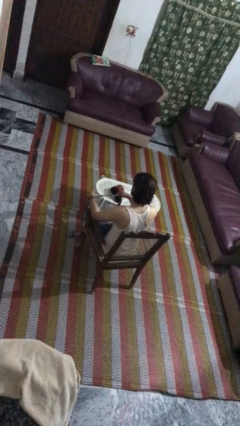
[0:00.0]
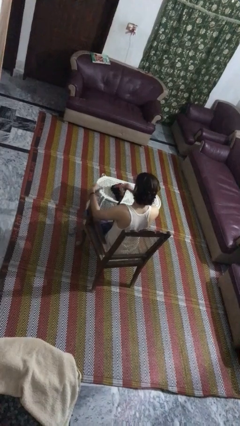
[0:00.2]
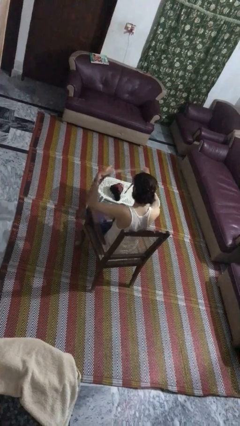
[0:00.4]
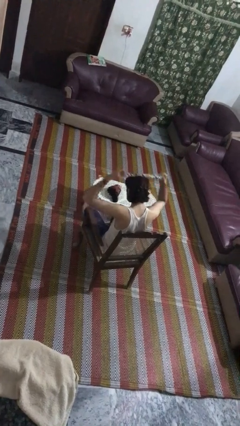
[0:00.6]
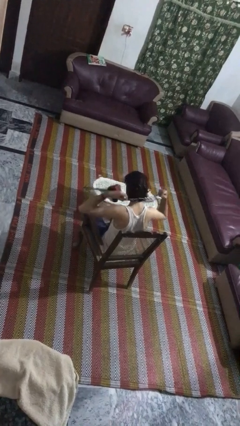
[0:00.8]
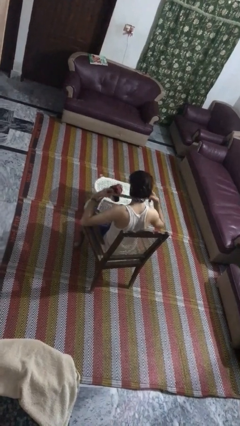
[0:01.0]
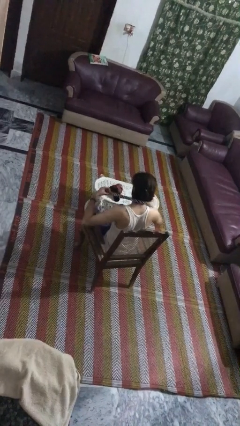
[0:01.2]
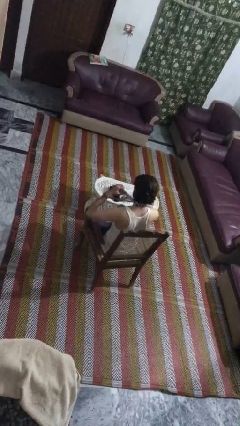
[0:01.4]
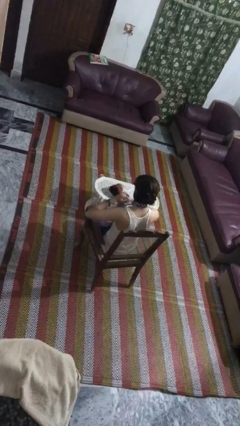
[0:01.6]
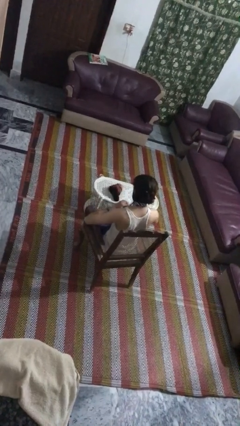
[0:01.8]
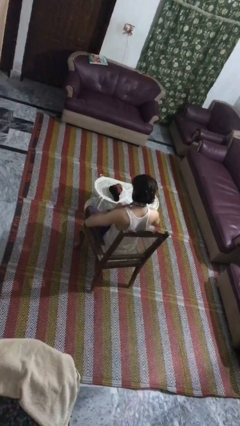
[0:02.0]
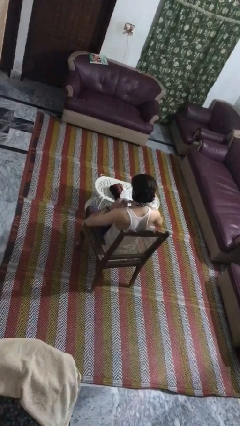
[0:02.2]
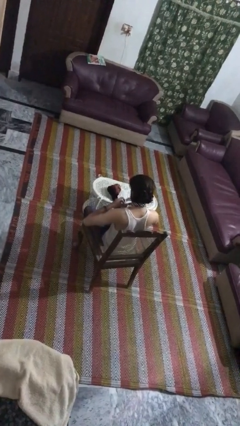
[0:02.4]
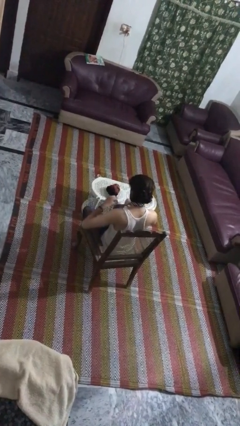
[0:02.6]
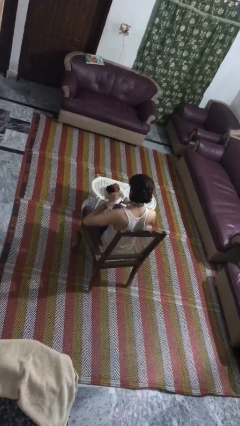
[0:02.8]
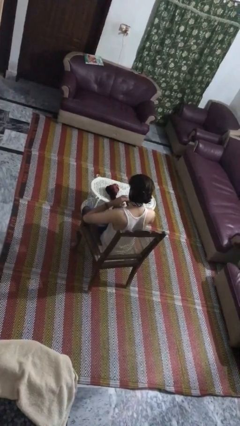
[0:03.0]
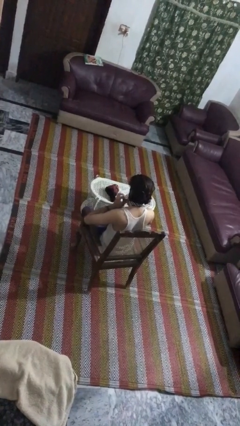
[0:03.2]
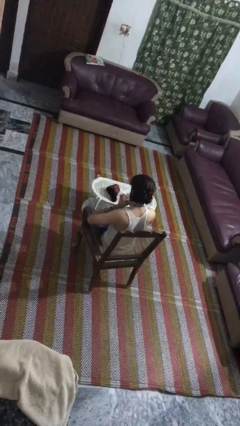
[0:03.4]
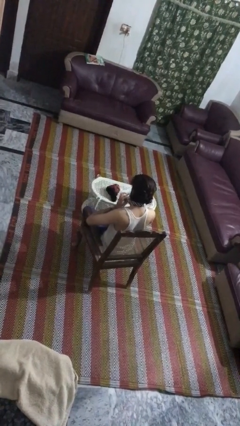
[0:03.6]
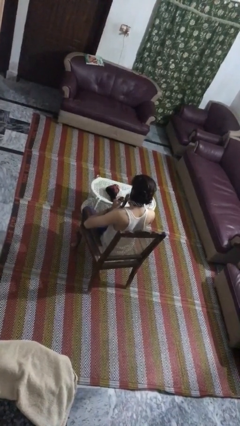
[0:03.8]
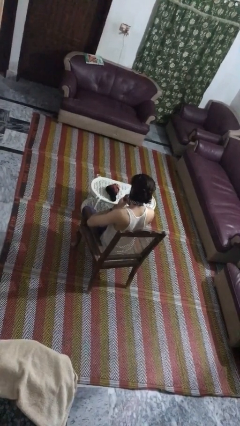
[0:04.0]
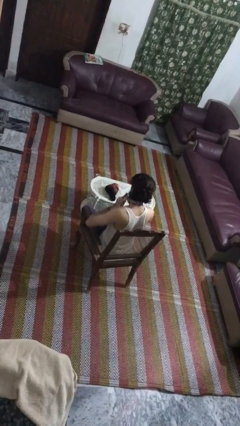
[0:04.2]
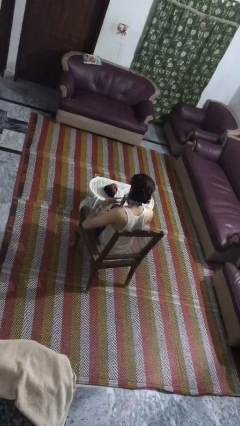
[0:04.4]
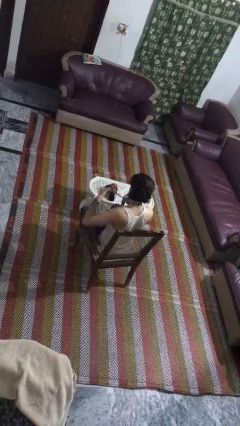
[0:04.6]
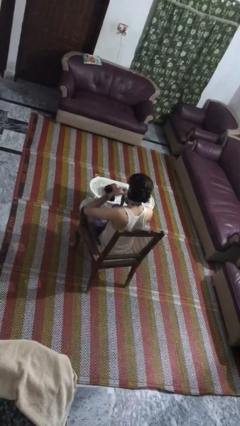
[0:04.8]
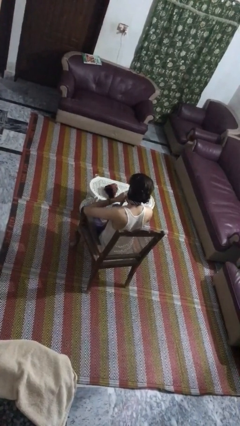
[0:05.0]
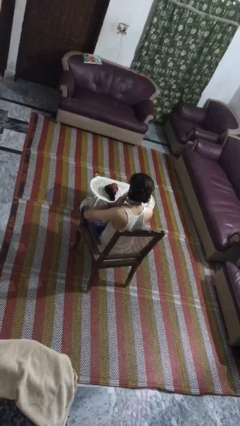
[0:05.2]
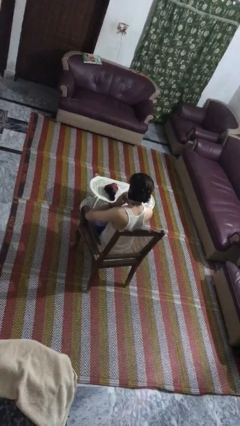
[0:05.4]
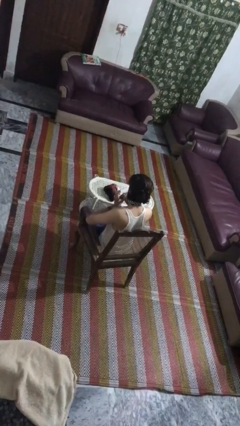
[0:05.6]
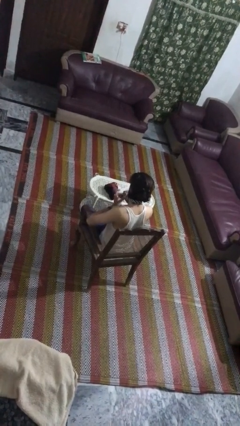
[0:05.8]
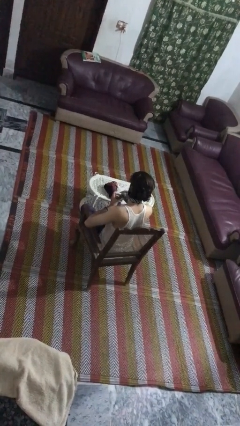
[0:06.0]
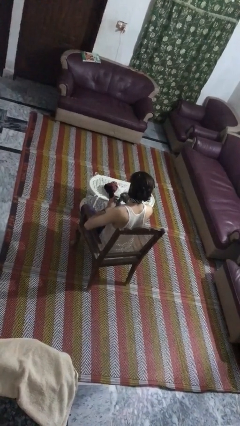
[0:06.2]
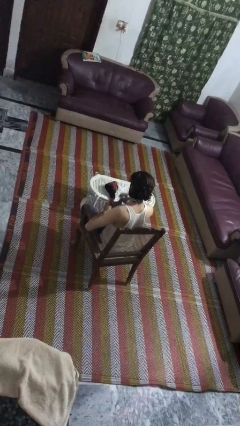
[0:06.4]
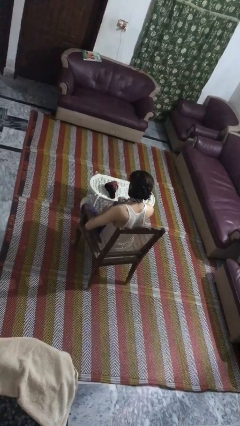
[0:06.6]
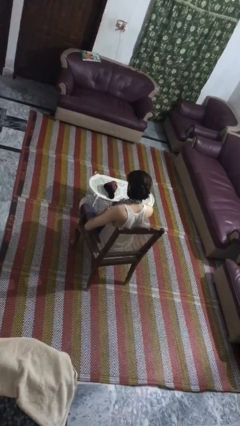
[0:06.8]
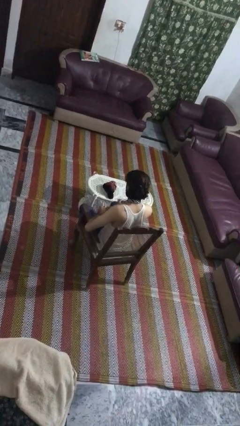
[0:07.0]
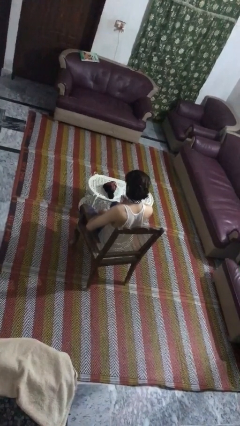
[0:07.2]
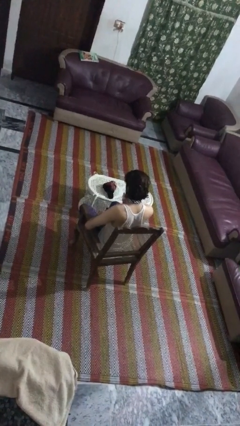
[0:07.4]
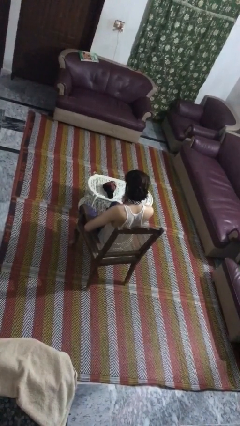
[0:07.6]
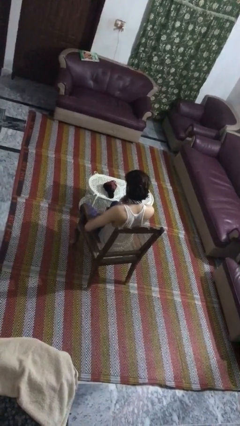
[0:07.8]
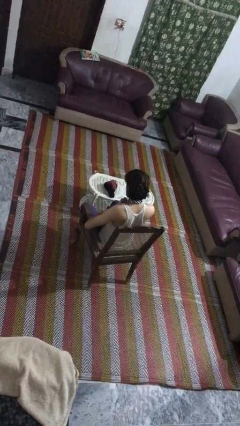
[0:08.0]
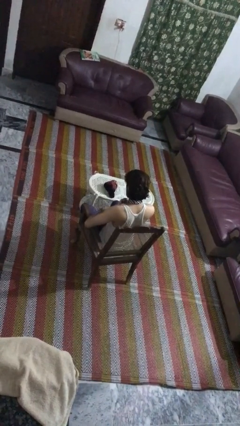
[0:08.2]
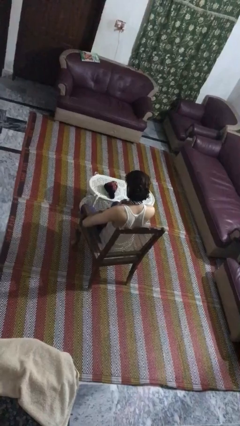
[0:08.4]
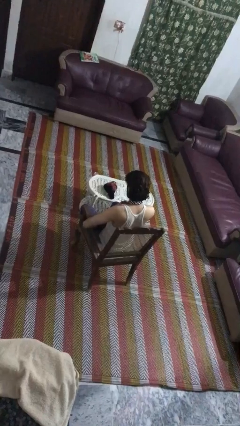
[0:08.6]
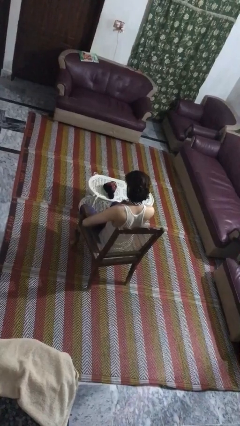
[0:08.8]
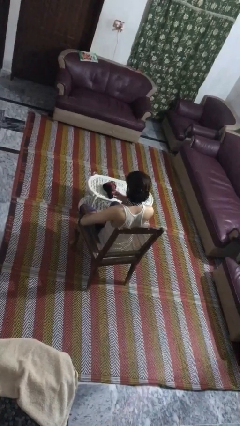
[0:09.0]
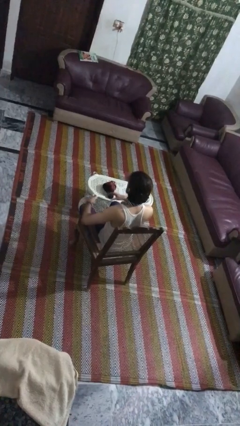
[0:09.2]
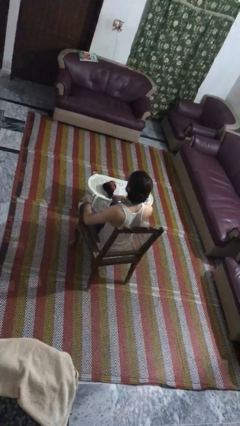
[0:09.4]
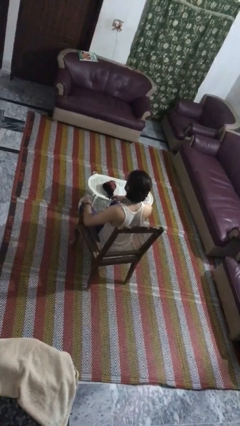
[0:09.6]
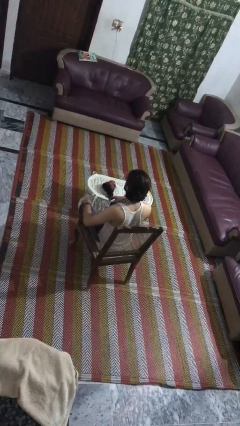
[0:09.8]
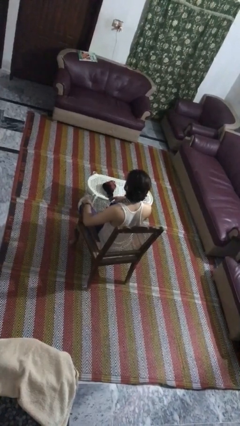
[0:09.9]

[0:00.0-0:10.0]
person puts on necktie

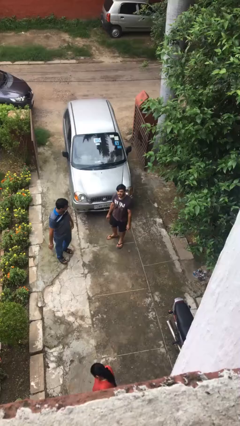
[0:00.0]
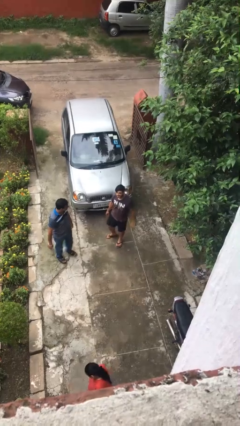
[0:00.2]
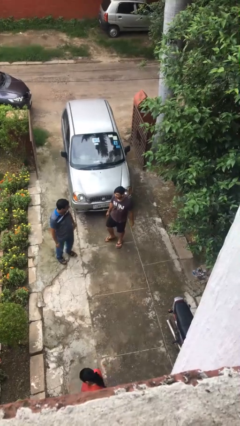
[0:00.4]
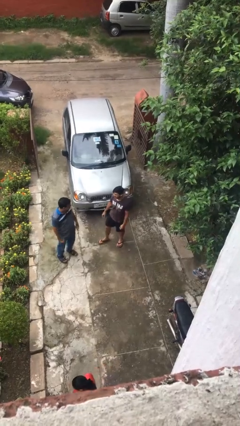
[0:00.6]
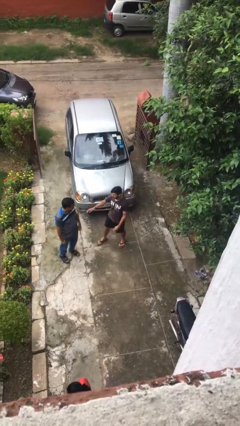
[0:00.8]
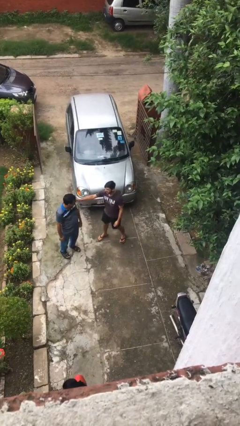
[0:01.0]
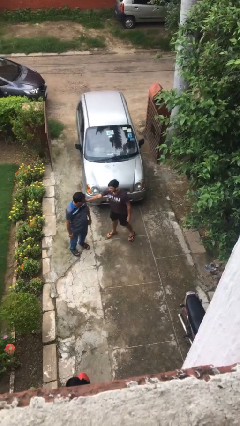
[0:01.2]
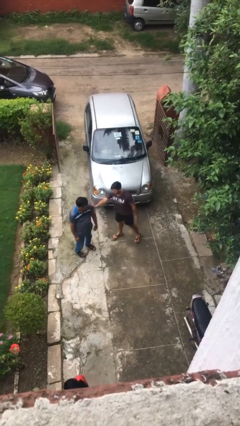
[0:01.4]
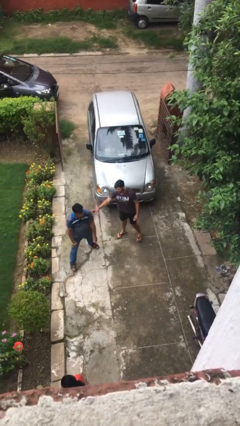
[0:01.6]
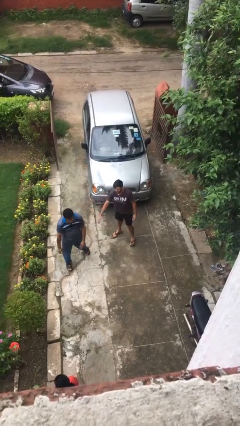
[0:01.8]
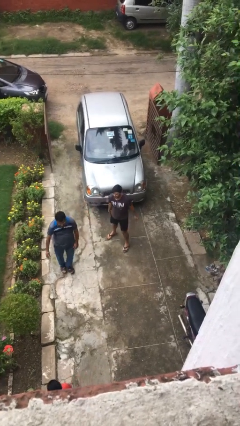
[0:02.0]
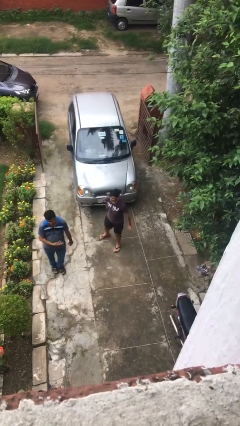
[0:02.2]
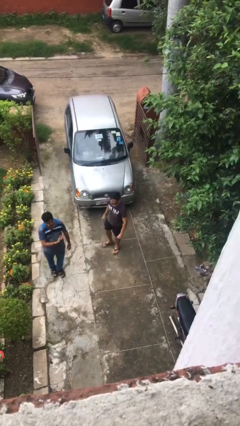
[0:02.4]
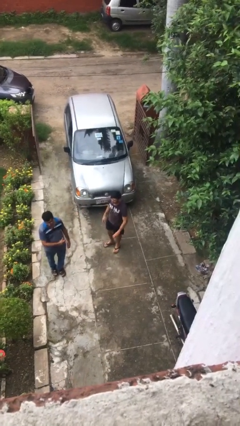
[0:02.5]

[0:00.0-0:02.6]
person shoves person

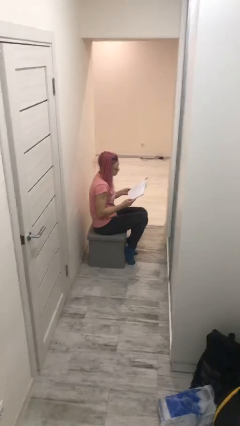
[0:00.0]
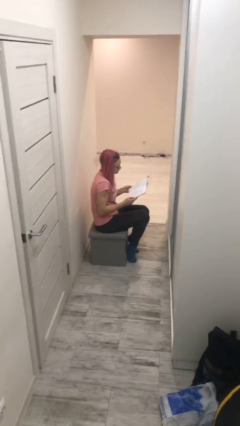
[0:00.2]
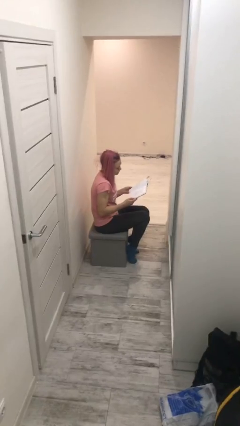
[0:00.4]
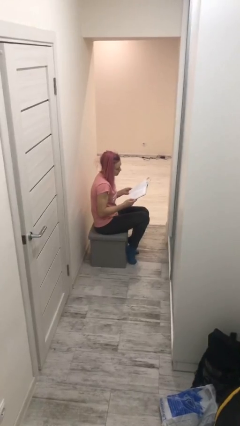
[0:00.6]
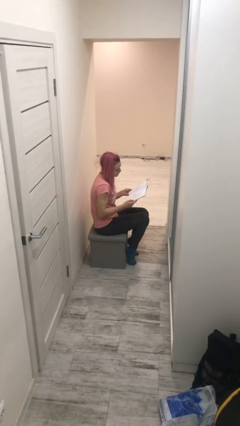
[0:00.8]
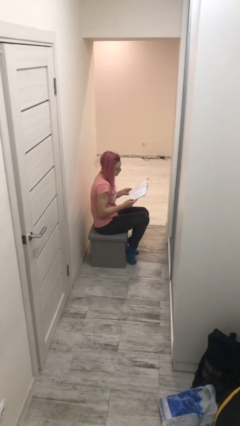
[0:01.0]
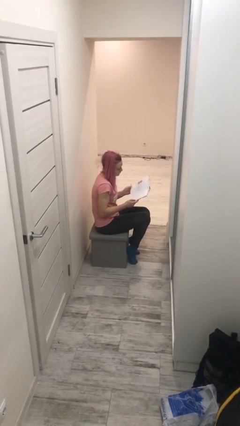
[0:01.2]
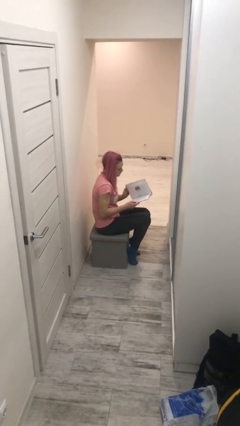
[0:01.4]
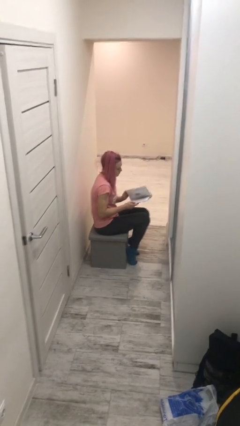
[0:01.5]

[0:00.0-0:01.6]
person reads document

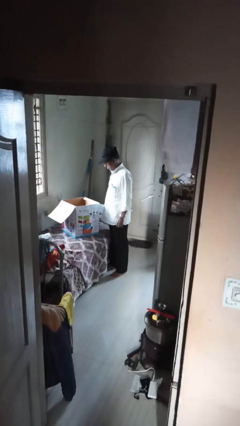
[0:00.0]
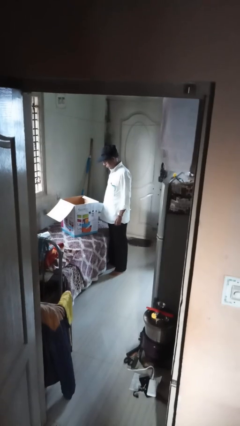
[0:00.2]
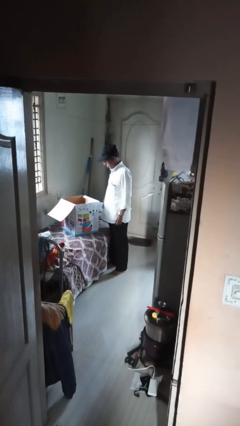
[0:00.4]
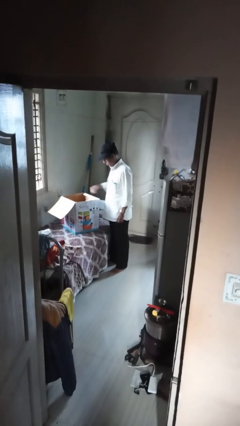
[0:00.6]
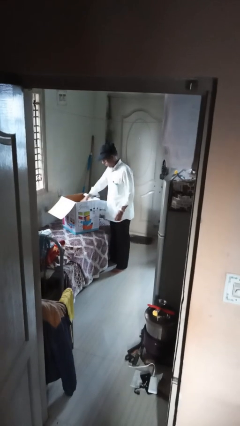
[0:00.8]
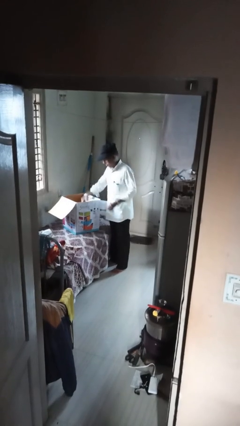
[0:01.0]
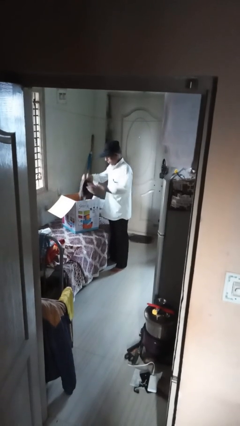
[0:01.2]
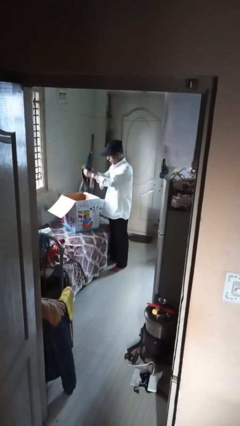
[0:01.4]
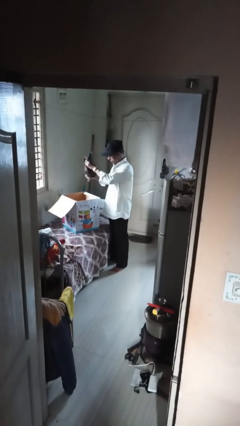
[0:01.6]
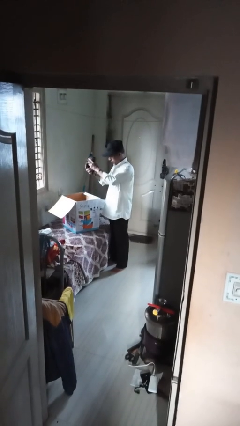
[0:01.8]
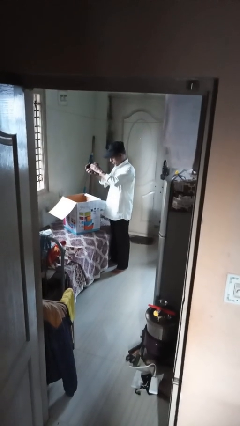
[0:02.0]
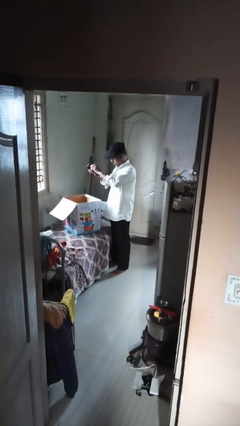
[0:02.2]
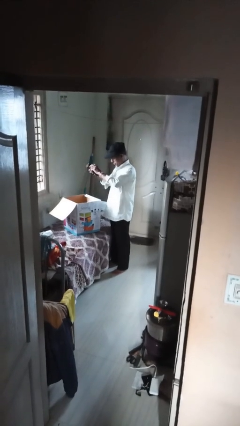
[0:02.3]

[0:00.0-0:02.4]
person takes object from box

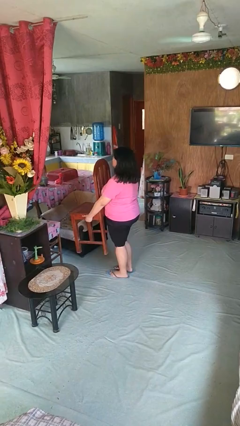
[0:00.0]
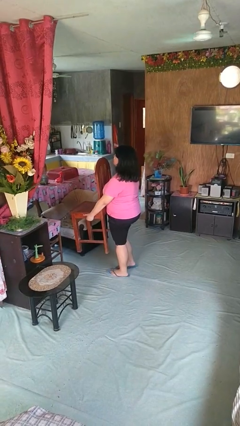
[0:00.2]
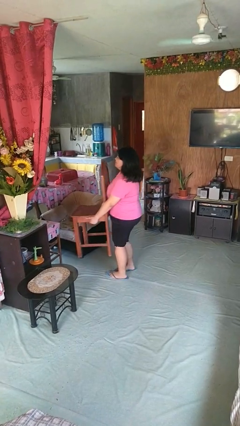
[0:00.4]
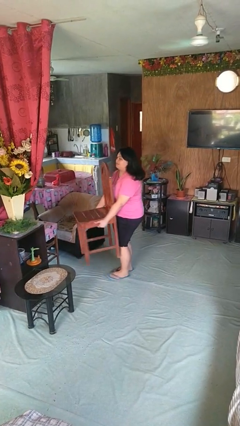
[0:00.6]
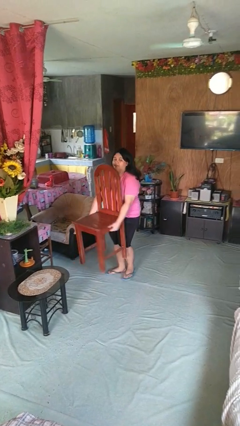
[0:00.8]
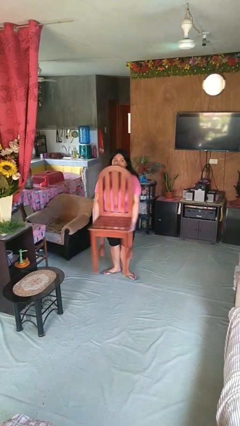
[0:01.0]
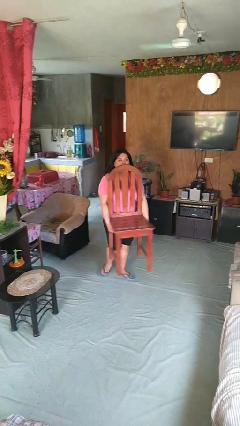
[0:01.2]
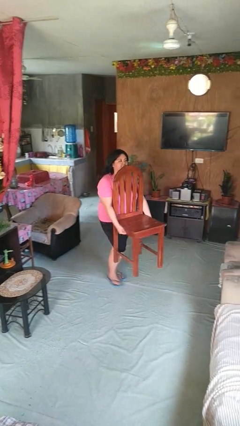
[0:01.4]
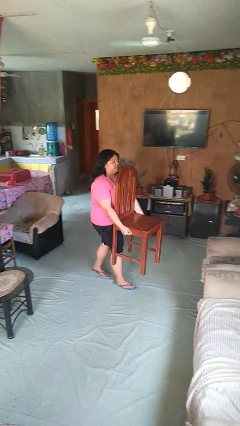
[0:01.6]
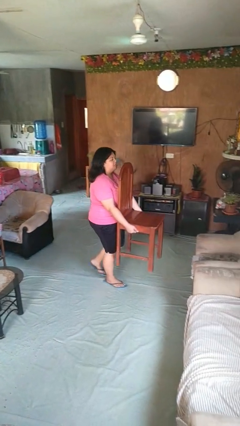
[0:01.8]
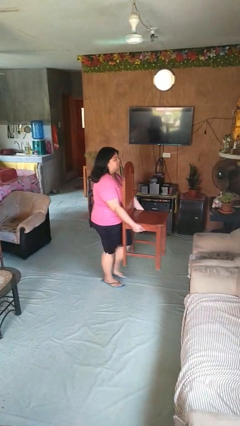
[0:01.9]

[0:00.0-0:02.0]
person carries furniture
